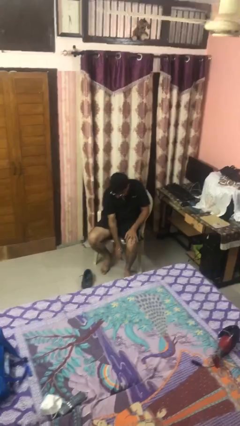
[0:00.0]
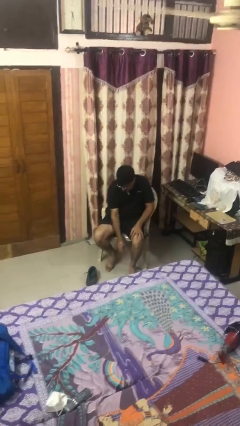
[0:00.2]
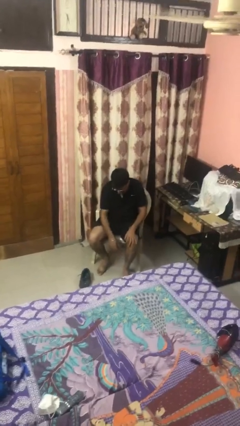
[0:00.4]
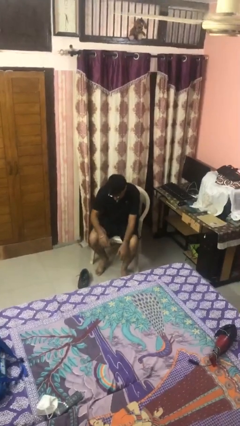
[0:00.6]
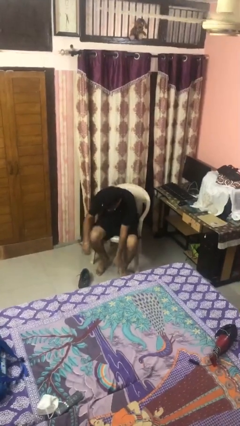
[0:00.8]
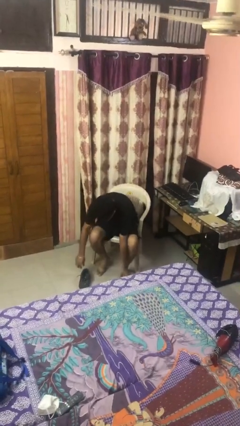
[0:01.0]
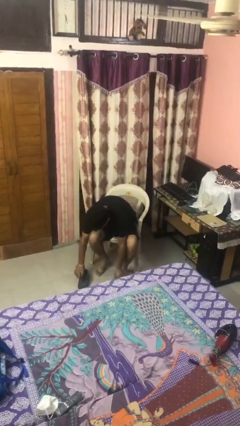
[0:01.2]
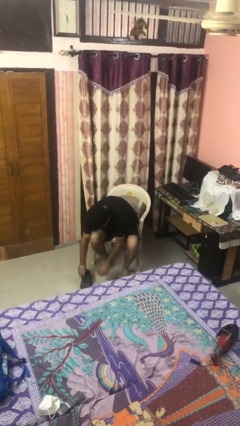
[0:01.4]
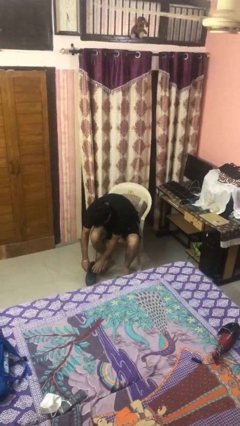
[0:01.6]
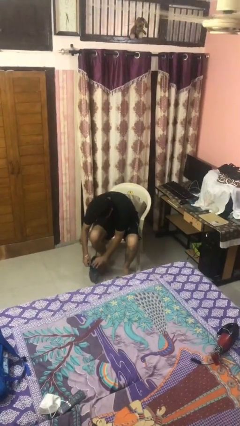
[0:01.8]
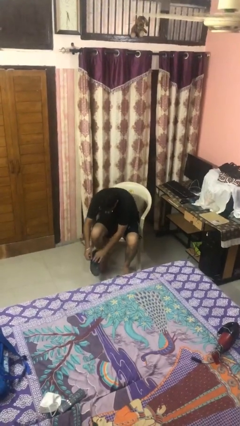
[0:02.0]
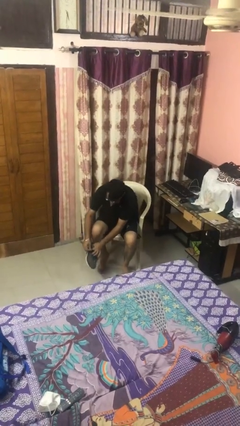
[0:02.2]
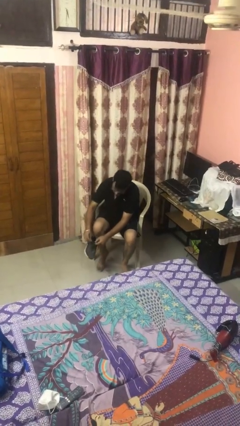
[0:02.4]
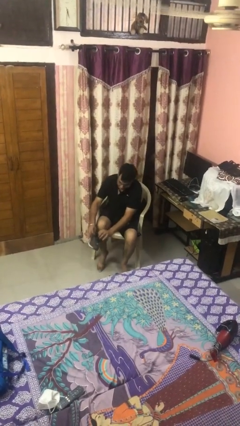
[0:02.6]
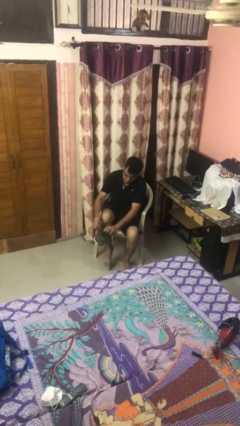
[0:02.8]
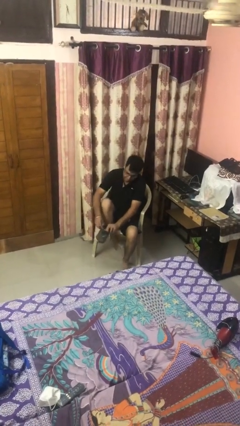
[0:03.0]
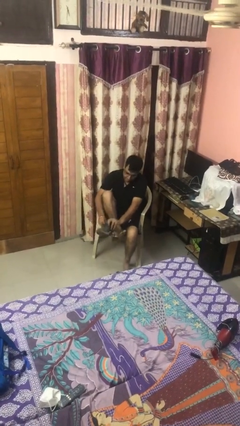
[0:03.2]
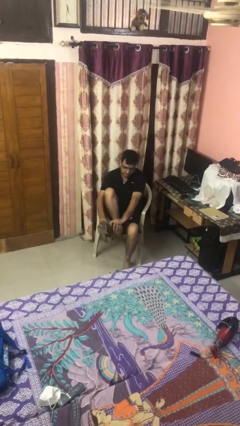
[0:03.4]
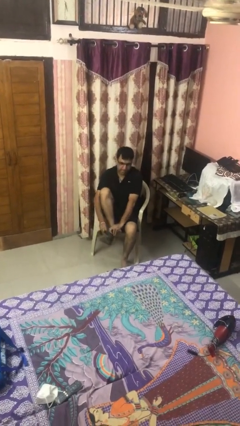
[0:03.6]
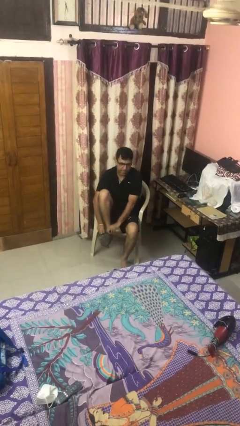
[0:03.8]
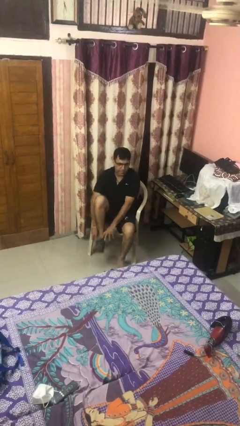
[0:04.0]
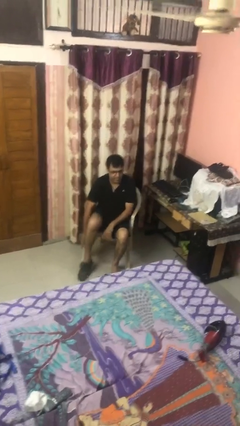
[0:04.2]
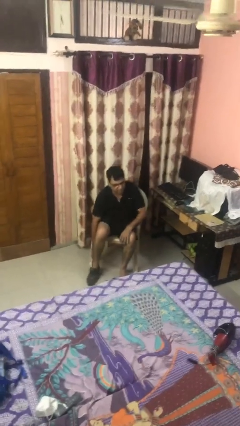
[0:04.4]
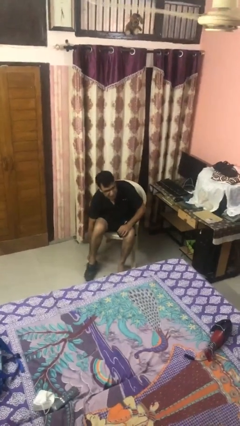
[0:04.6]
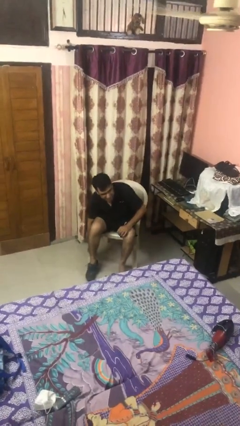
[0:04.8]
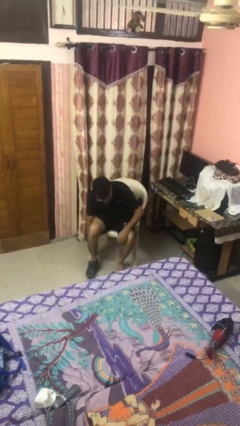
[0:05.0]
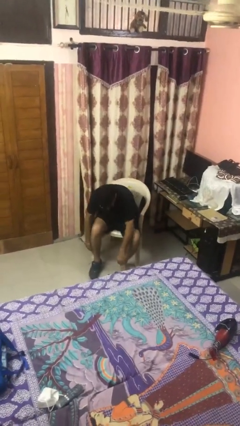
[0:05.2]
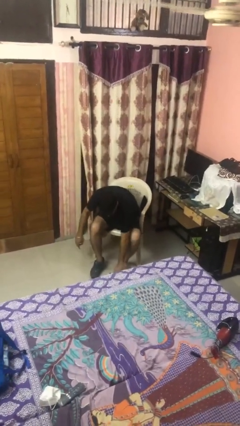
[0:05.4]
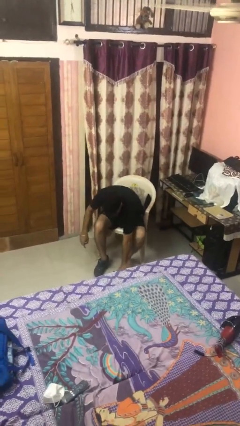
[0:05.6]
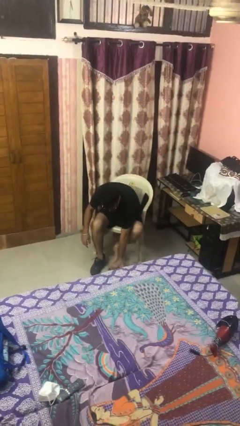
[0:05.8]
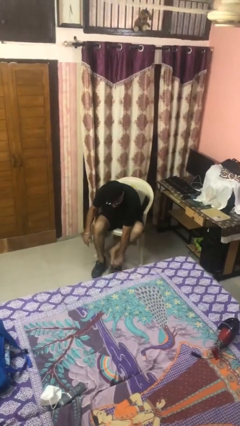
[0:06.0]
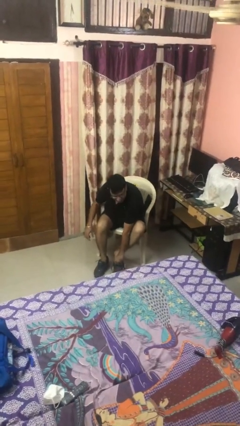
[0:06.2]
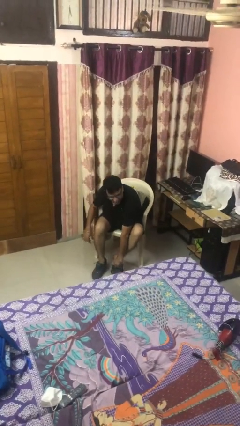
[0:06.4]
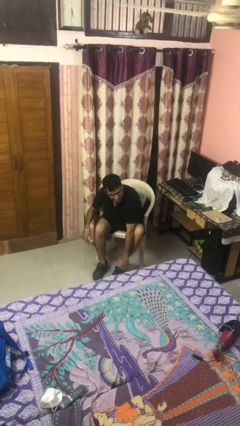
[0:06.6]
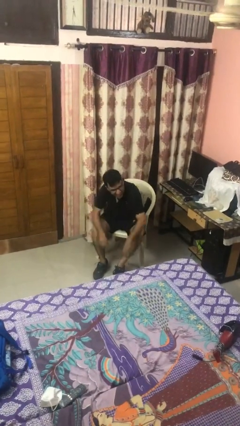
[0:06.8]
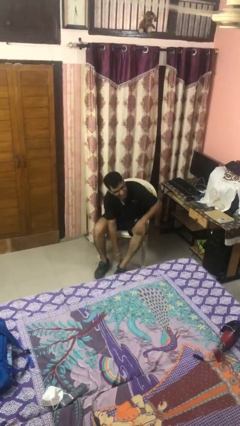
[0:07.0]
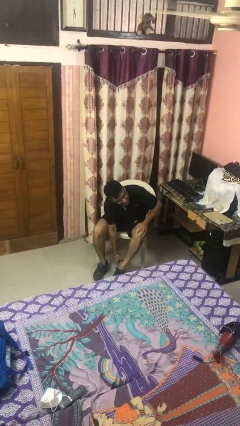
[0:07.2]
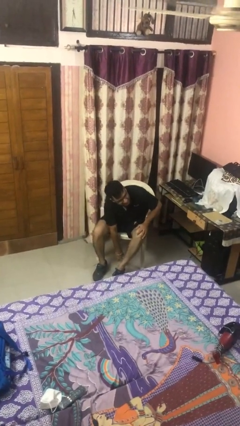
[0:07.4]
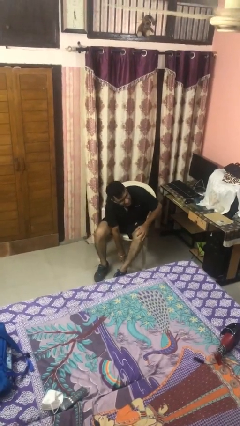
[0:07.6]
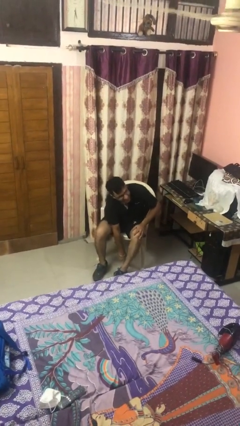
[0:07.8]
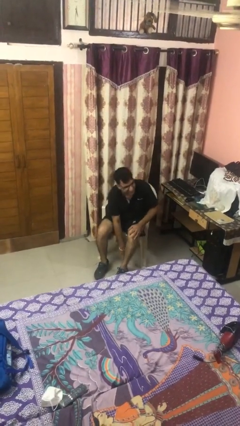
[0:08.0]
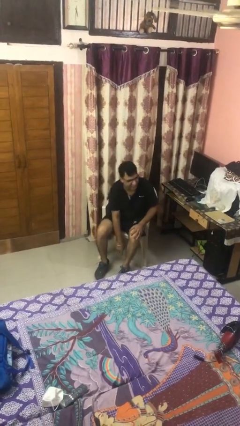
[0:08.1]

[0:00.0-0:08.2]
person puts on shoes

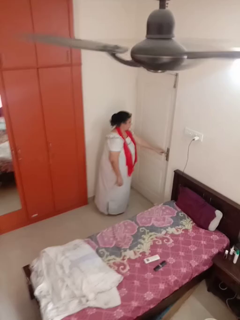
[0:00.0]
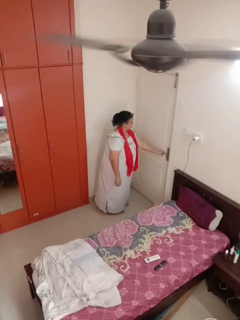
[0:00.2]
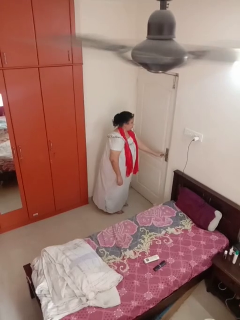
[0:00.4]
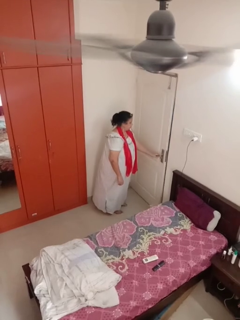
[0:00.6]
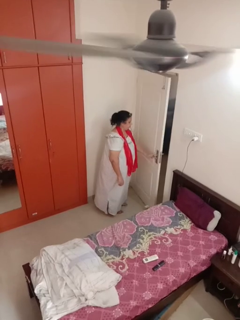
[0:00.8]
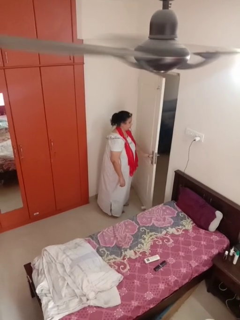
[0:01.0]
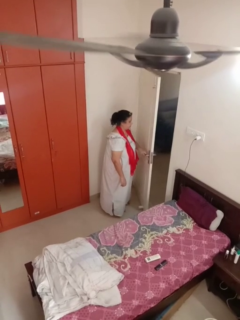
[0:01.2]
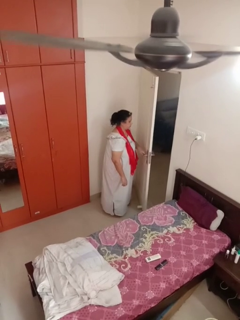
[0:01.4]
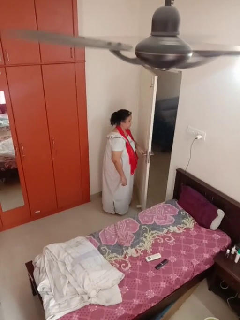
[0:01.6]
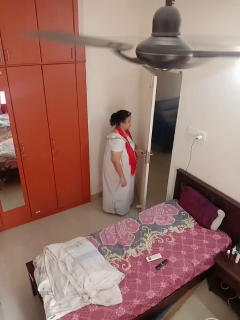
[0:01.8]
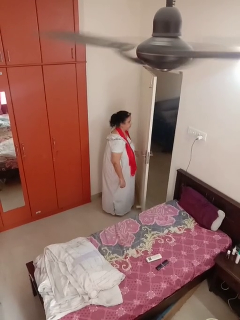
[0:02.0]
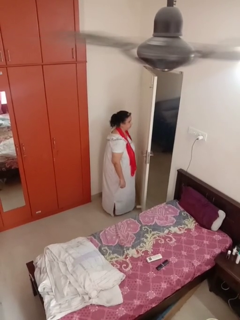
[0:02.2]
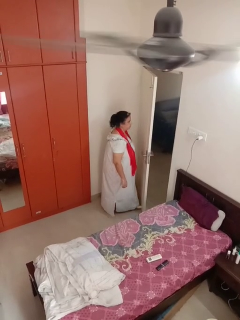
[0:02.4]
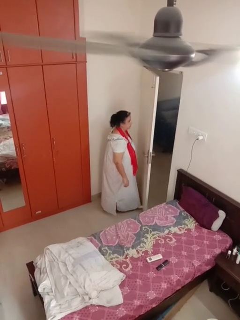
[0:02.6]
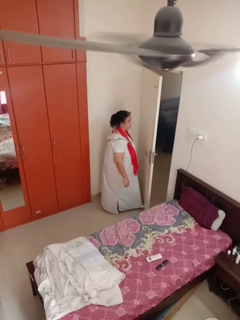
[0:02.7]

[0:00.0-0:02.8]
person opens facility door

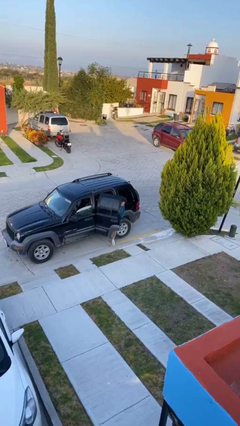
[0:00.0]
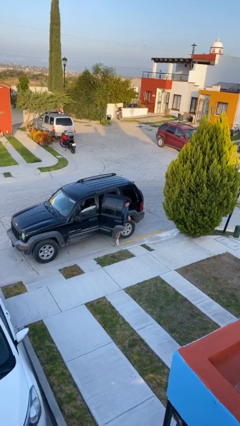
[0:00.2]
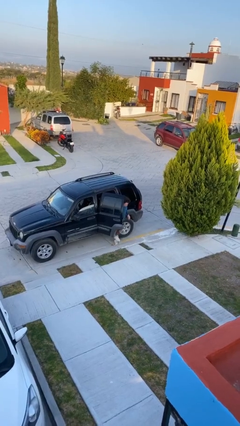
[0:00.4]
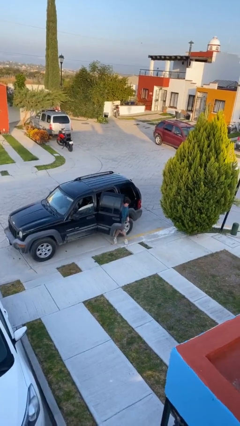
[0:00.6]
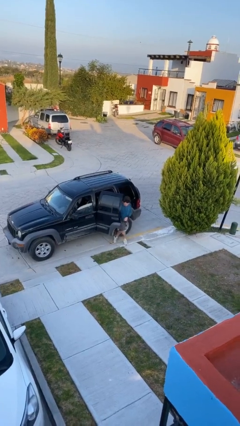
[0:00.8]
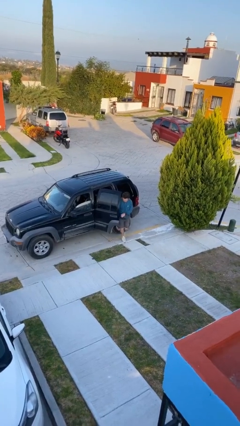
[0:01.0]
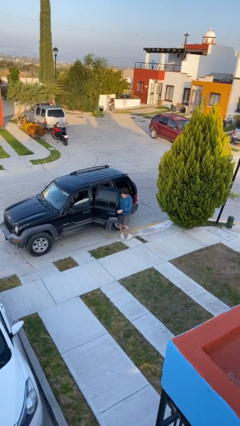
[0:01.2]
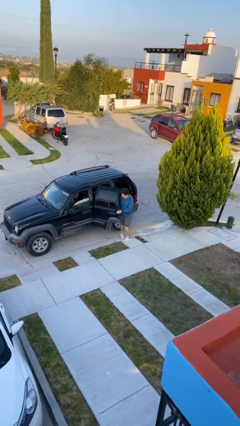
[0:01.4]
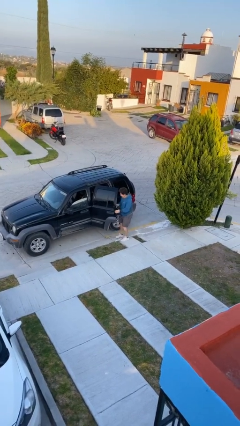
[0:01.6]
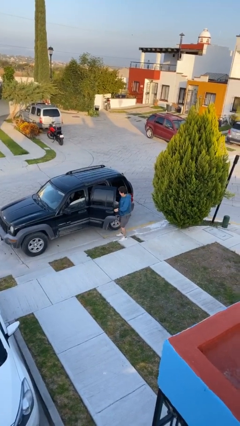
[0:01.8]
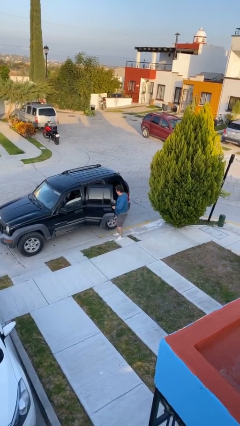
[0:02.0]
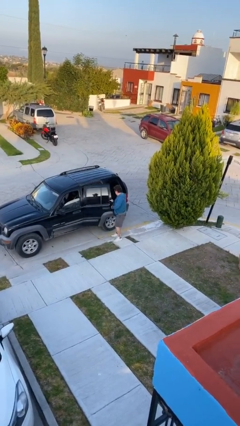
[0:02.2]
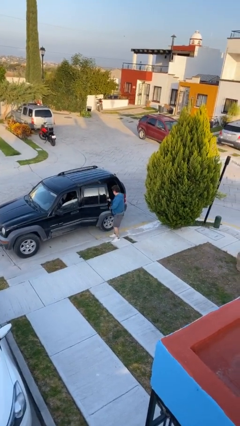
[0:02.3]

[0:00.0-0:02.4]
person exits car

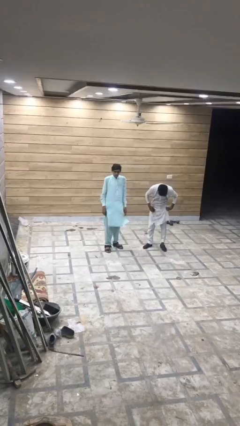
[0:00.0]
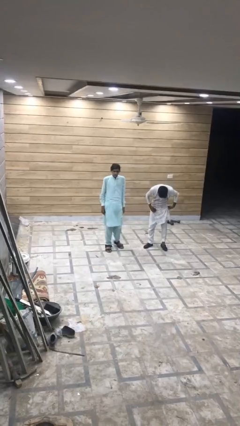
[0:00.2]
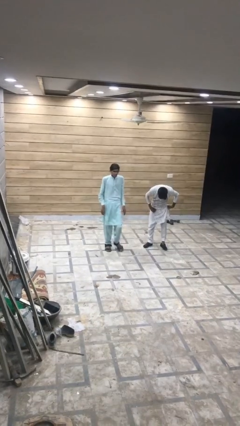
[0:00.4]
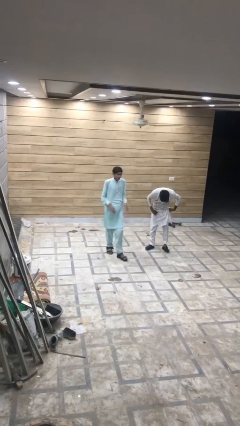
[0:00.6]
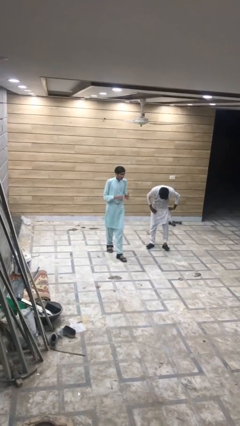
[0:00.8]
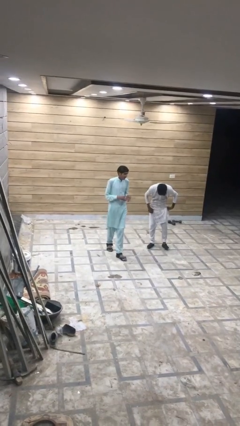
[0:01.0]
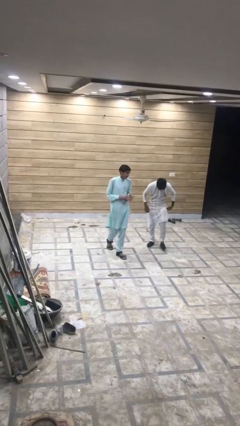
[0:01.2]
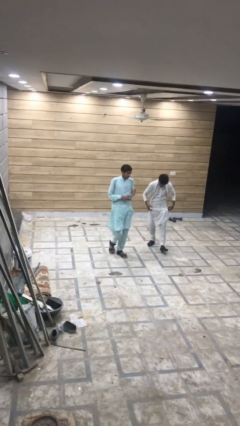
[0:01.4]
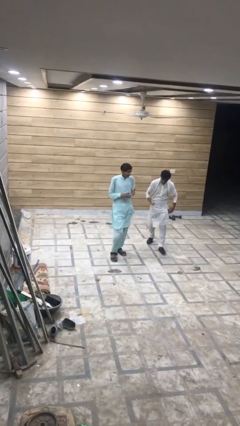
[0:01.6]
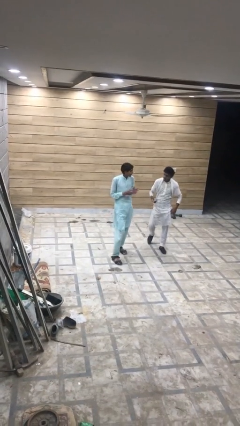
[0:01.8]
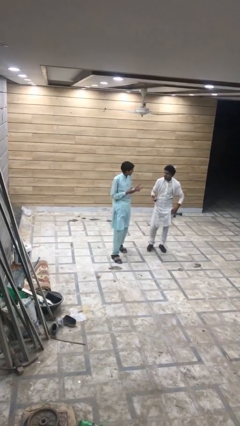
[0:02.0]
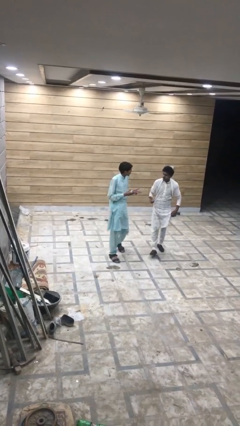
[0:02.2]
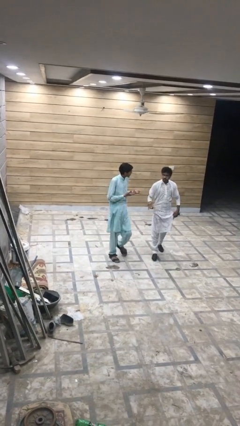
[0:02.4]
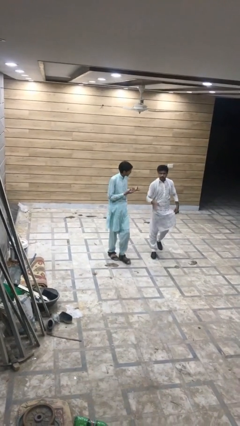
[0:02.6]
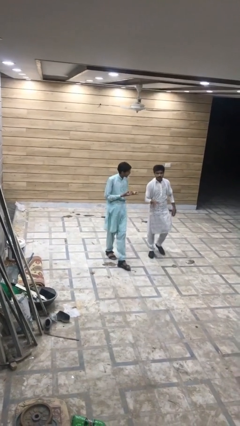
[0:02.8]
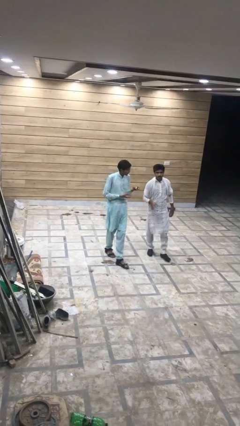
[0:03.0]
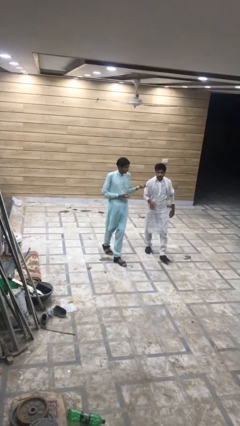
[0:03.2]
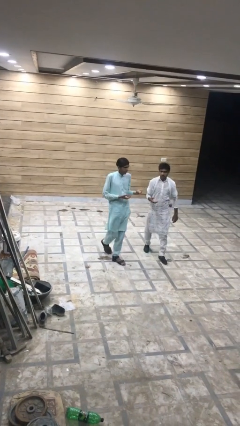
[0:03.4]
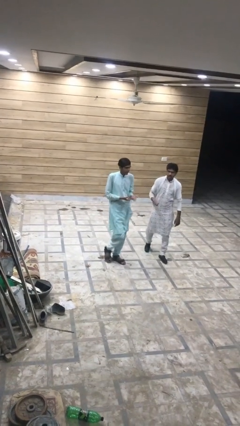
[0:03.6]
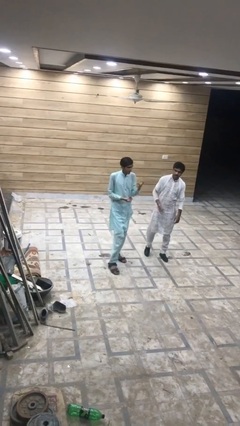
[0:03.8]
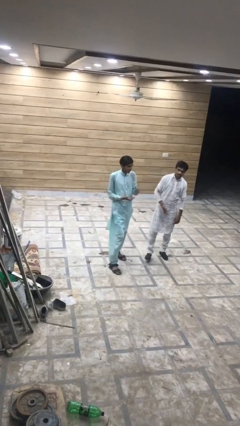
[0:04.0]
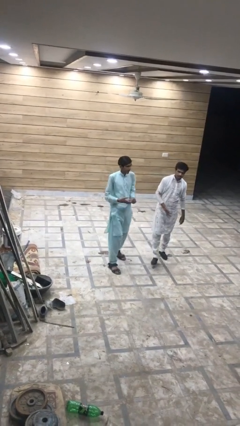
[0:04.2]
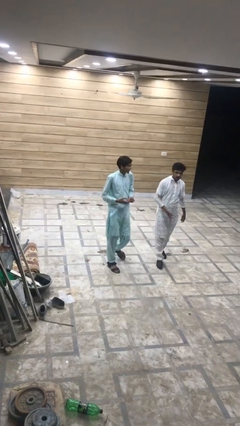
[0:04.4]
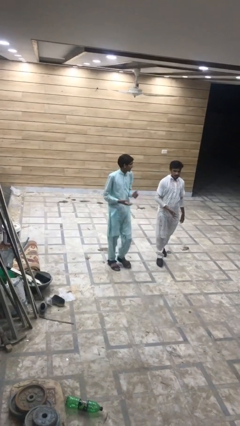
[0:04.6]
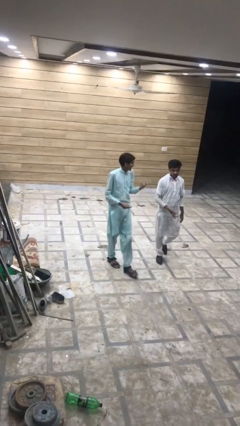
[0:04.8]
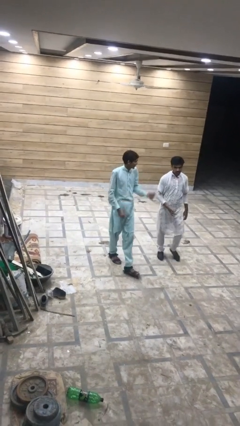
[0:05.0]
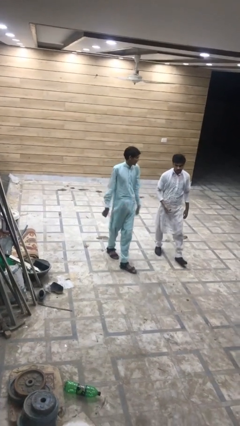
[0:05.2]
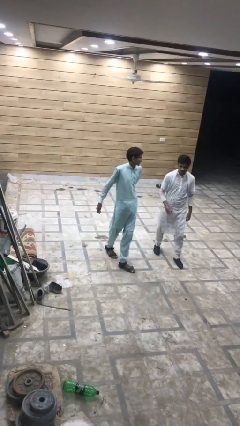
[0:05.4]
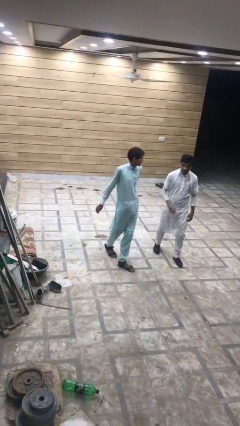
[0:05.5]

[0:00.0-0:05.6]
person talks to person
